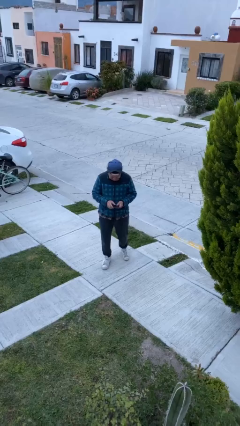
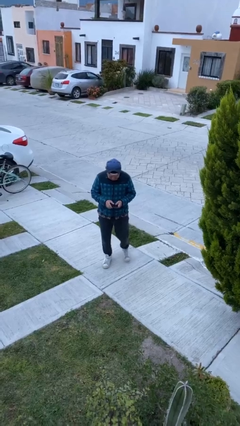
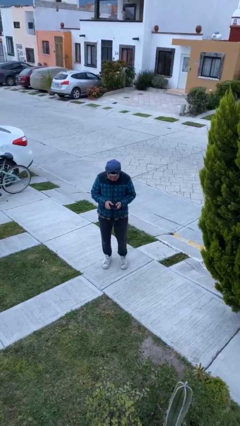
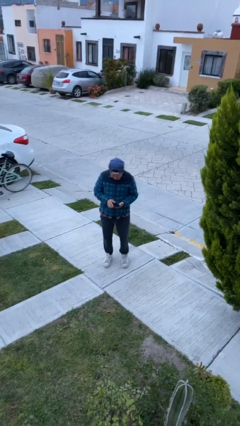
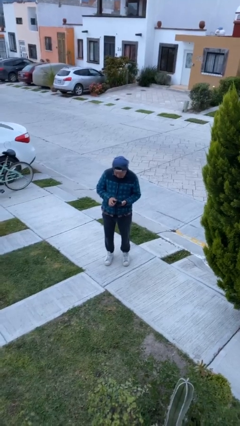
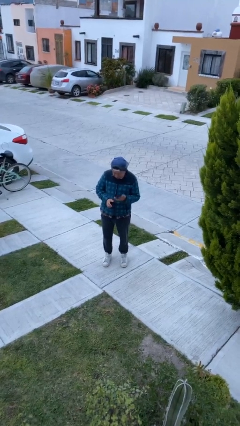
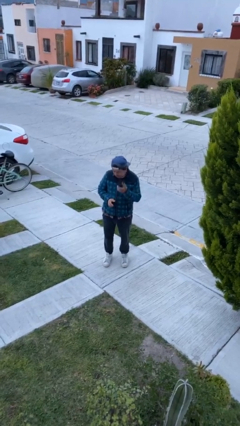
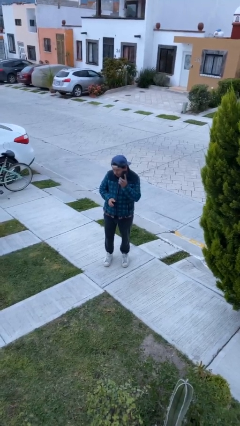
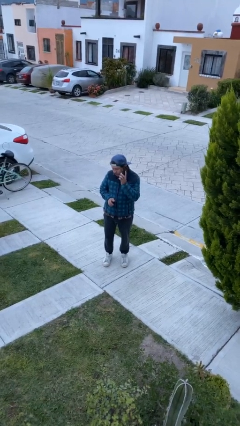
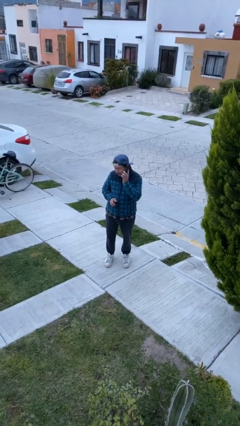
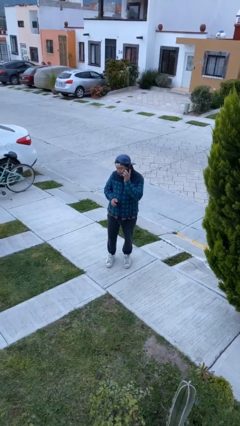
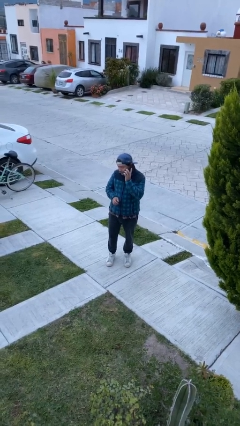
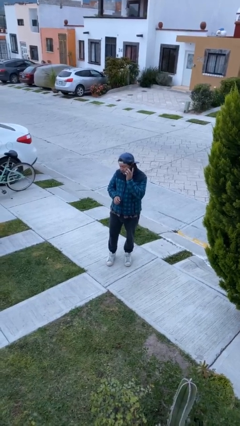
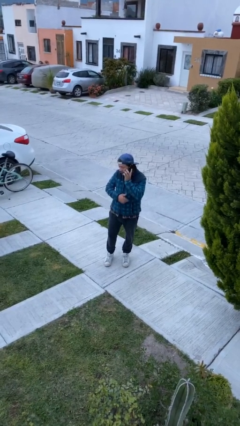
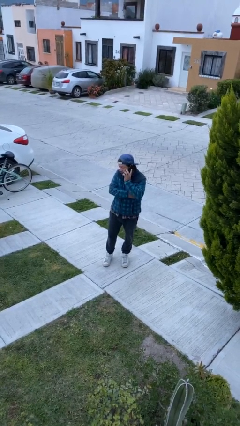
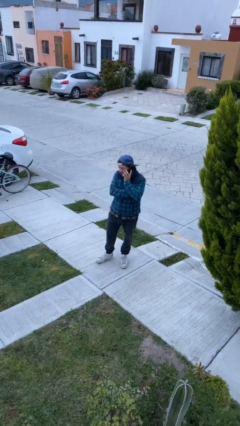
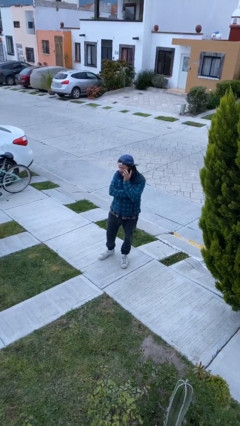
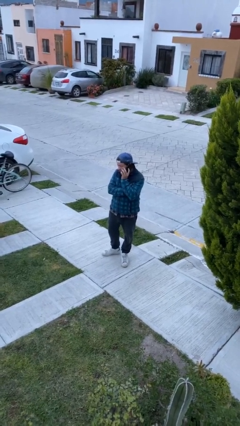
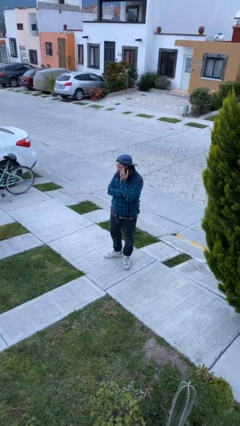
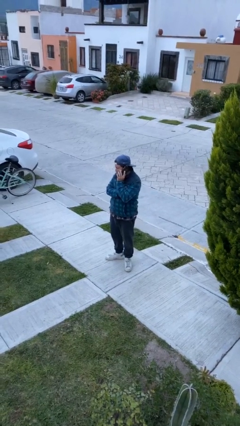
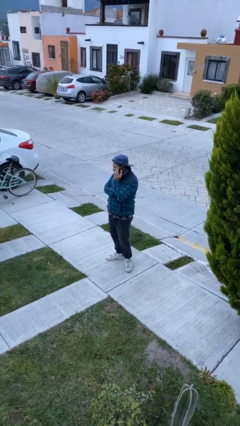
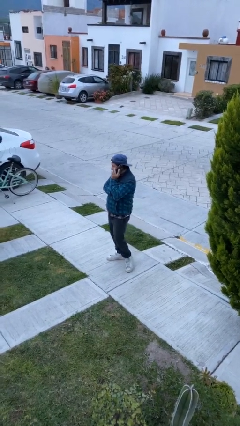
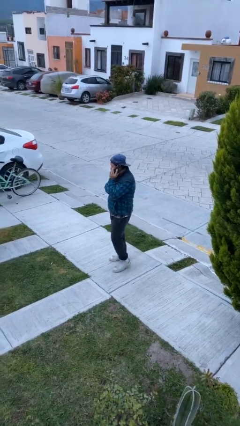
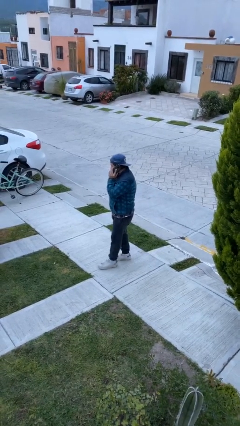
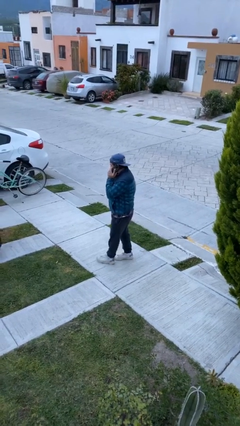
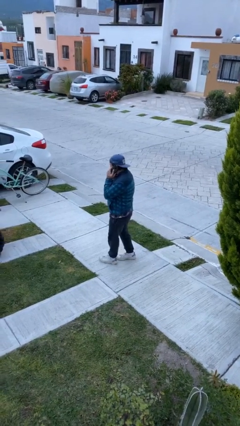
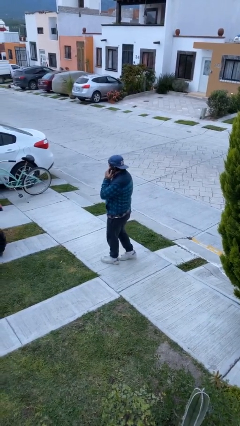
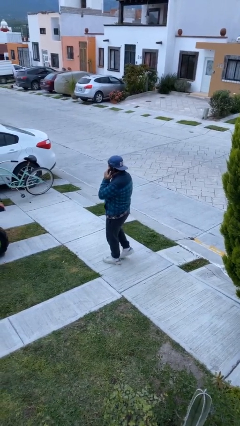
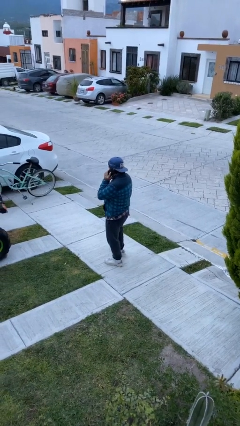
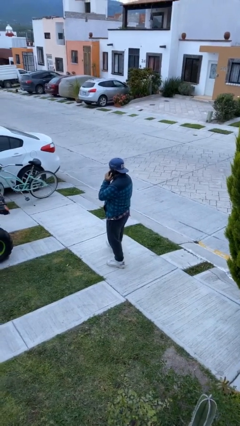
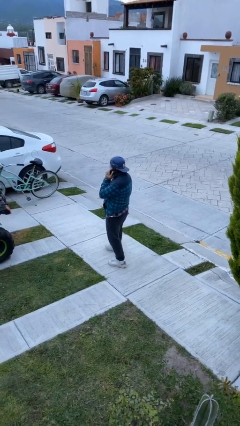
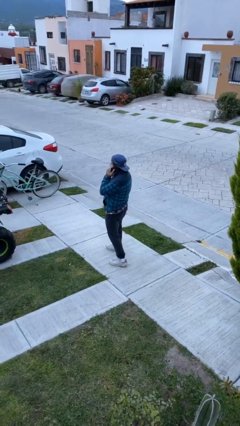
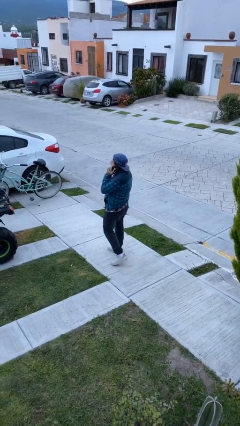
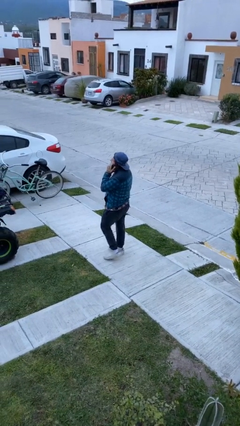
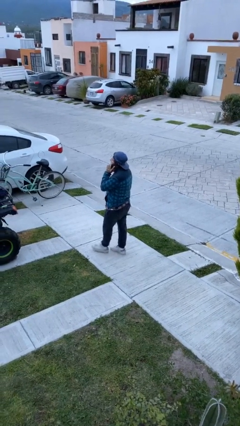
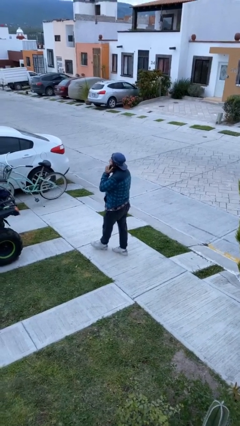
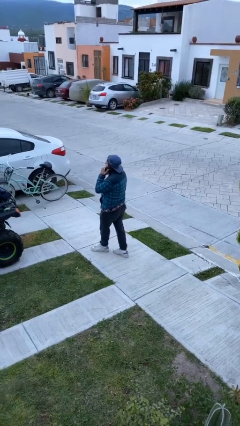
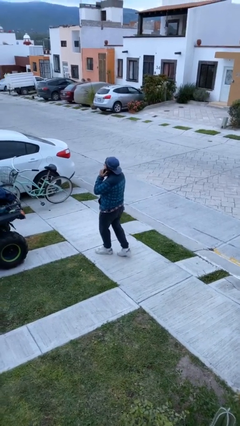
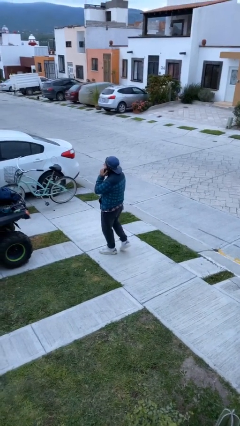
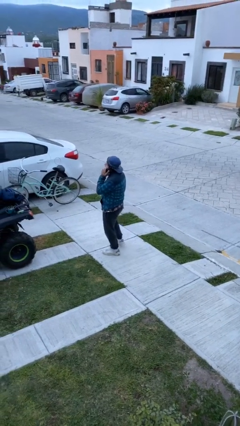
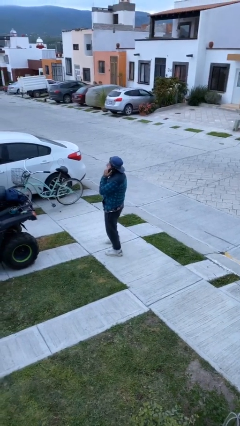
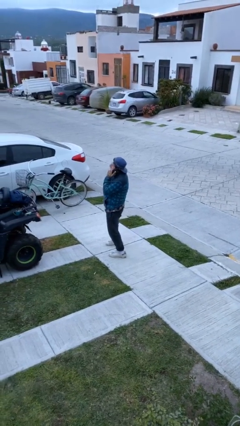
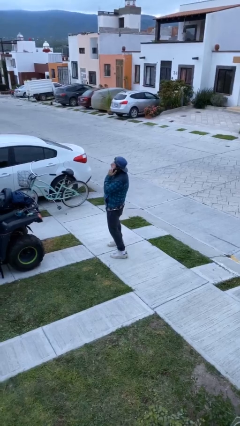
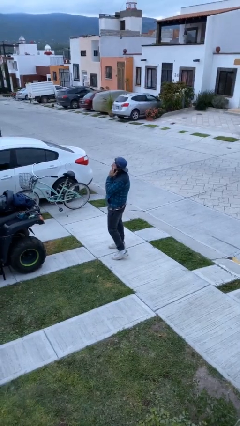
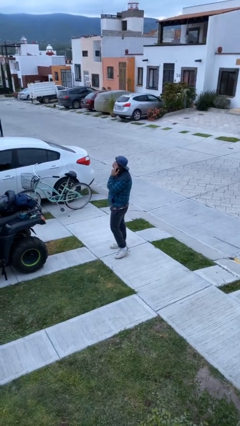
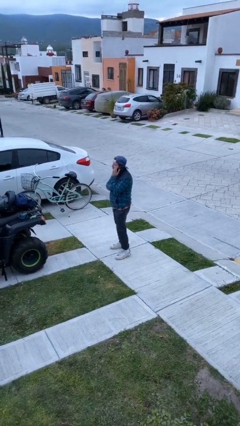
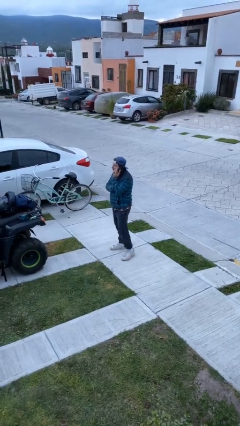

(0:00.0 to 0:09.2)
person talks on phone

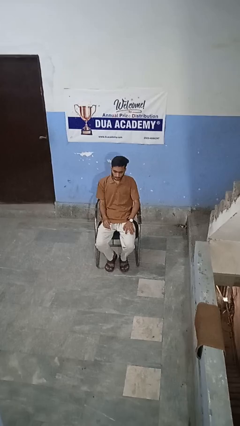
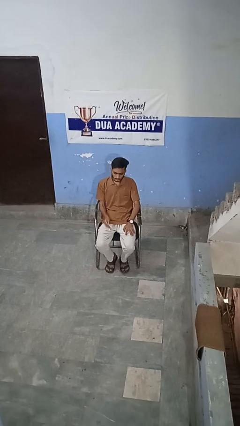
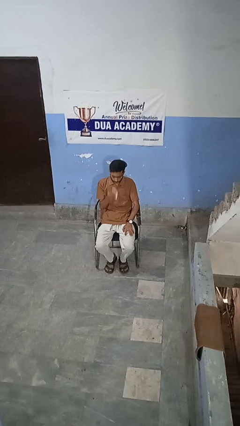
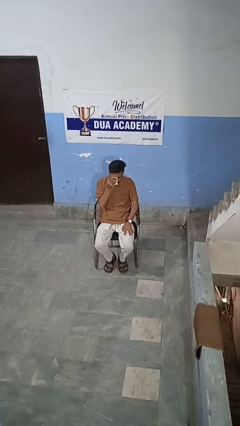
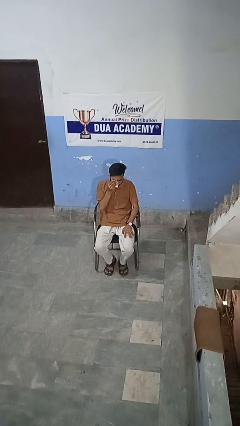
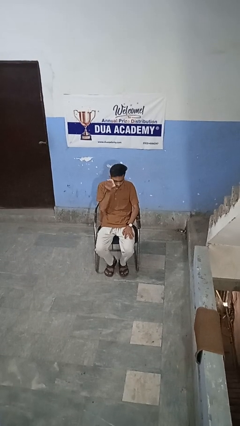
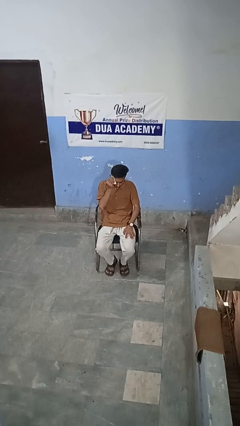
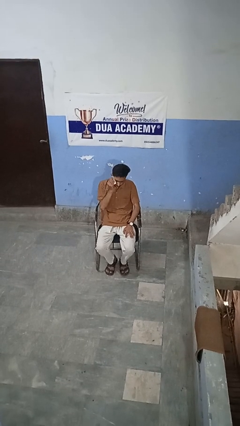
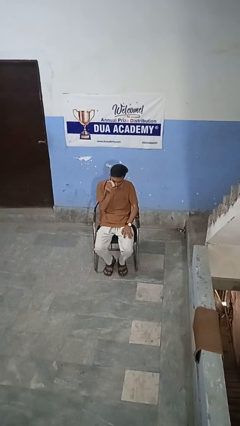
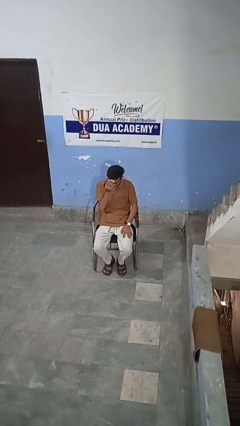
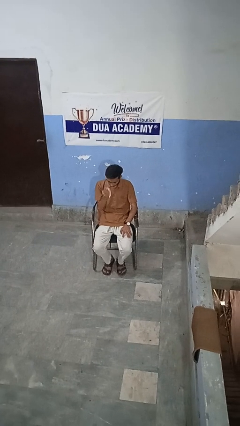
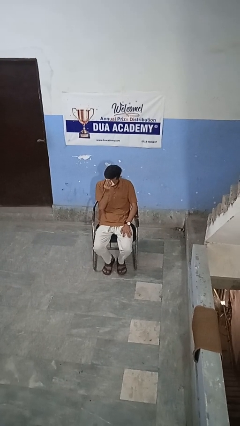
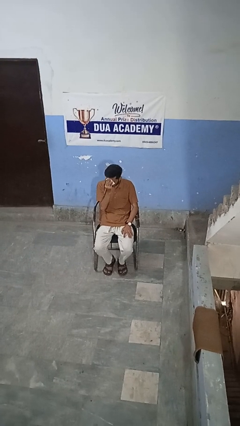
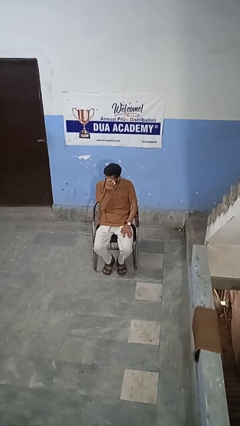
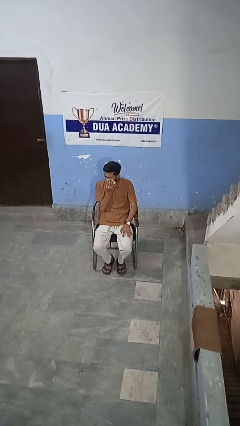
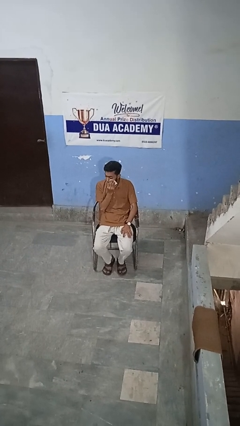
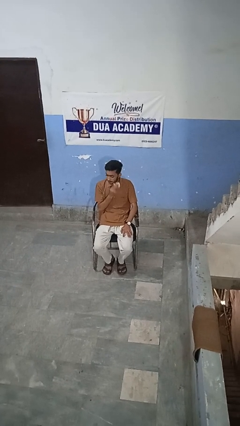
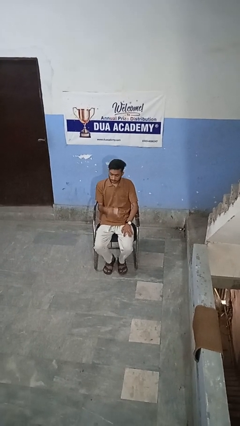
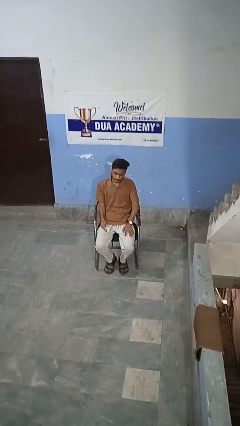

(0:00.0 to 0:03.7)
person wipes mouth with napkin

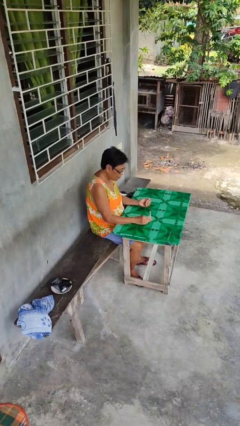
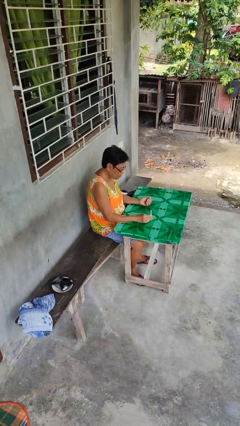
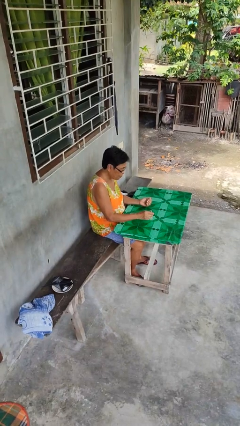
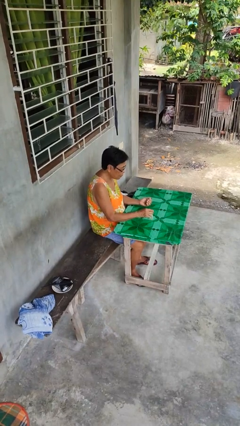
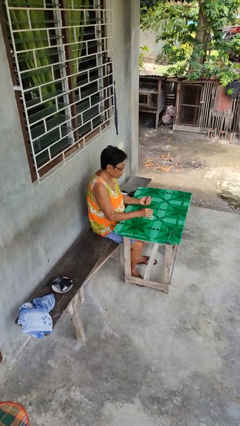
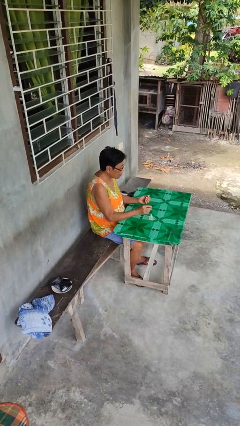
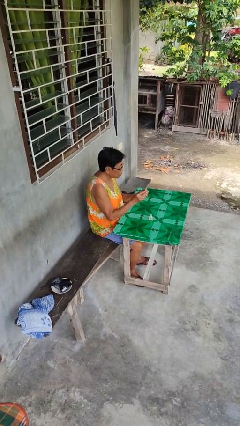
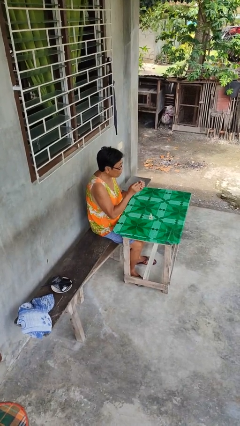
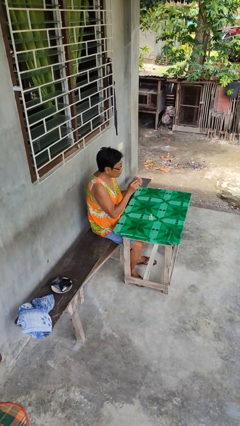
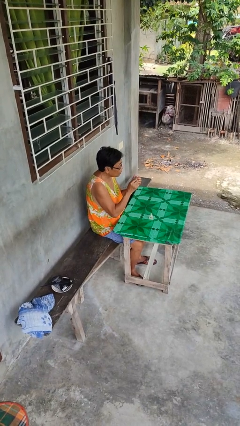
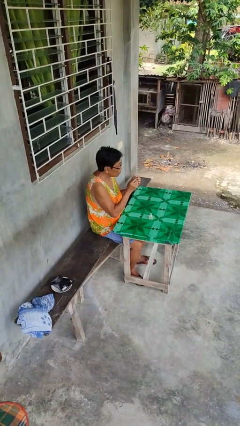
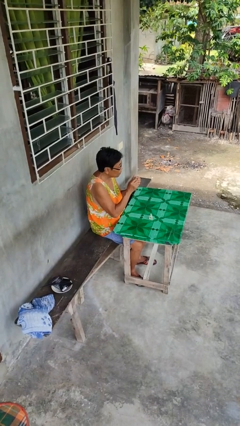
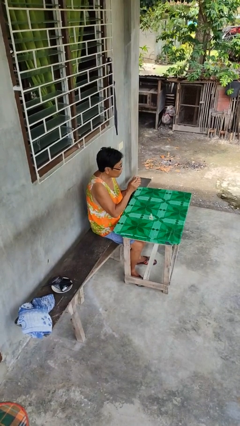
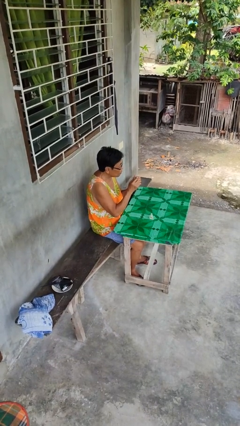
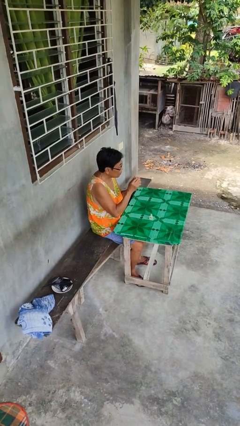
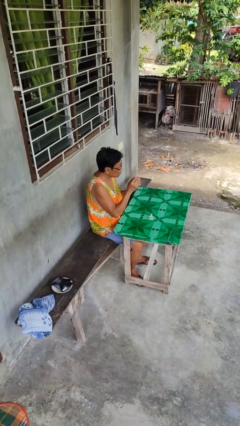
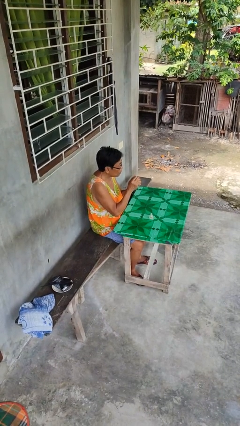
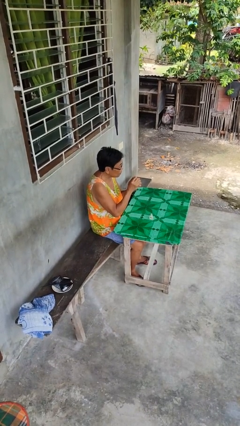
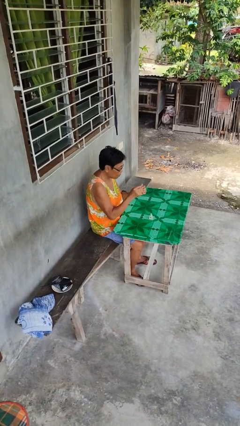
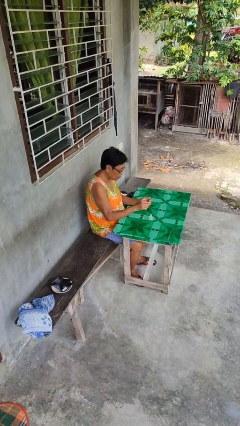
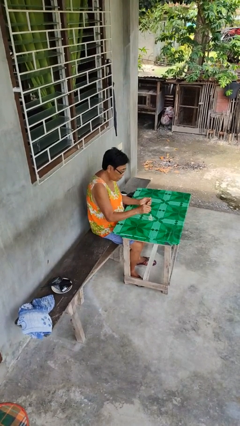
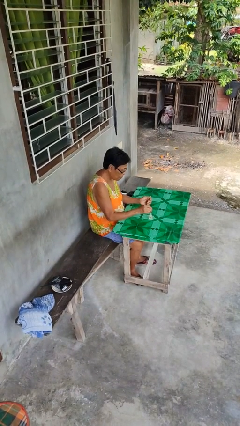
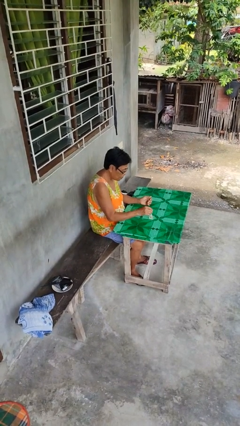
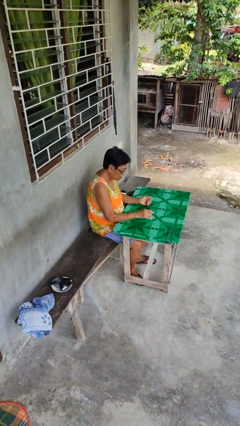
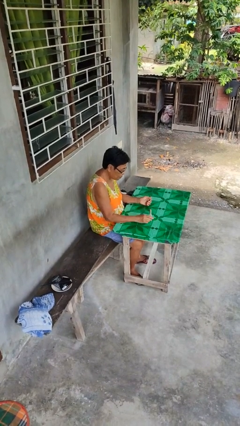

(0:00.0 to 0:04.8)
person paints fingernails
